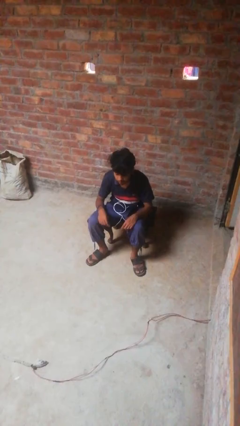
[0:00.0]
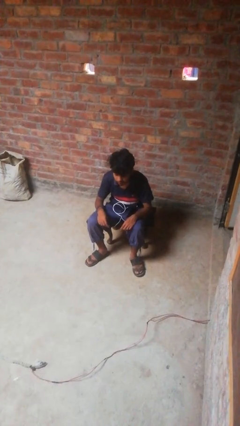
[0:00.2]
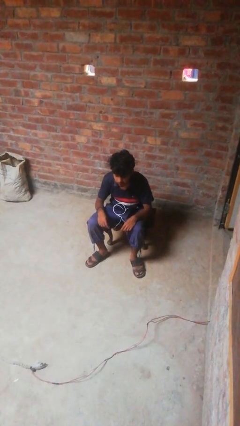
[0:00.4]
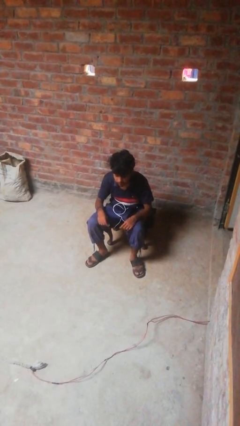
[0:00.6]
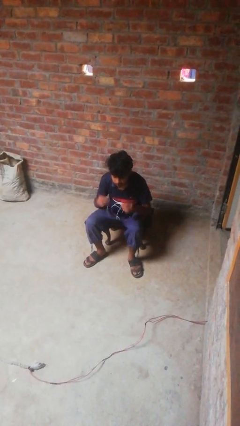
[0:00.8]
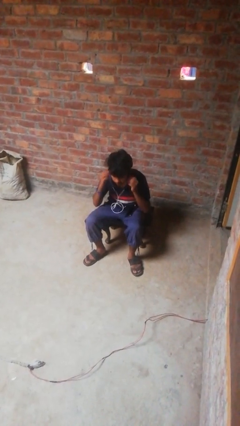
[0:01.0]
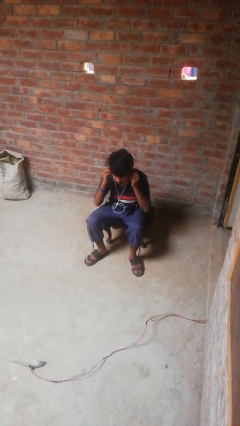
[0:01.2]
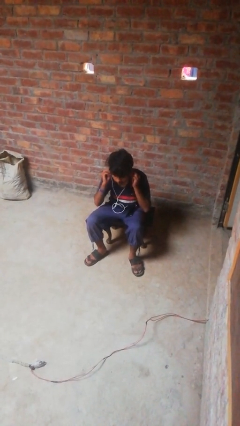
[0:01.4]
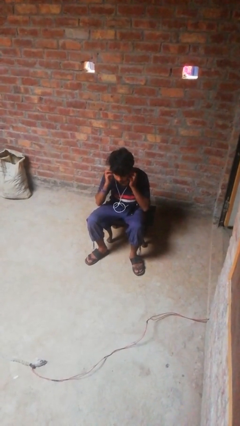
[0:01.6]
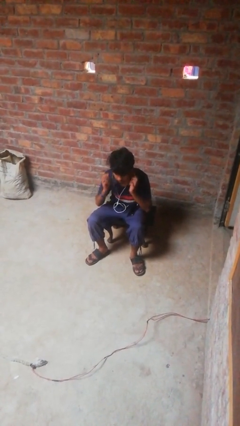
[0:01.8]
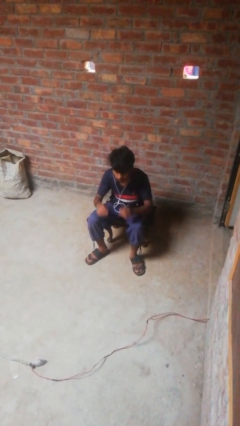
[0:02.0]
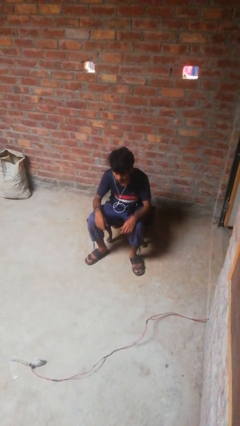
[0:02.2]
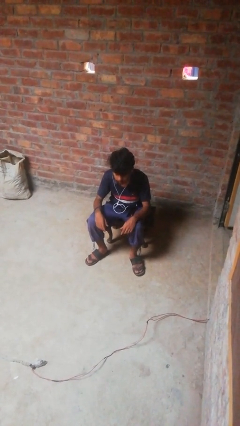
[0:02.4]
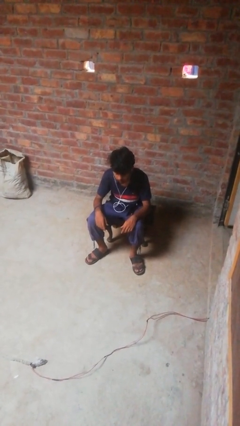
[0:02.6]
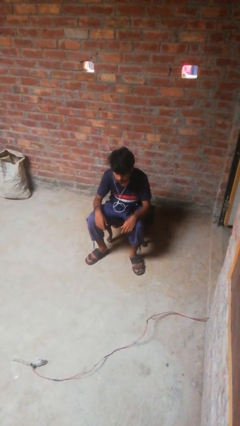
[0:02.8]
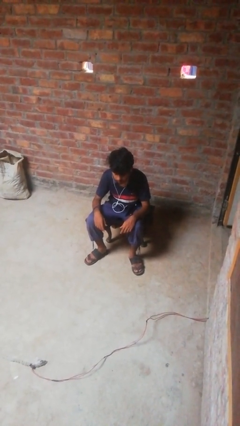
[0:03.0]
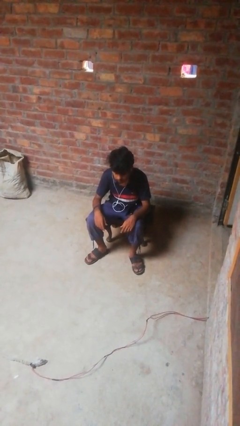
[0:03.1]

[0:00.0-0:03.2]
person puts on headphones

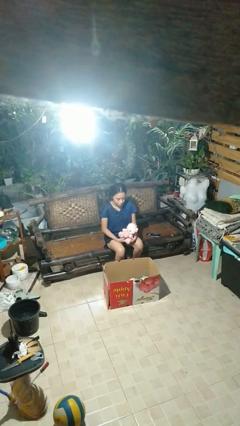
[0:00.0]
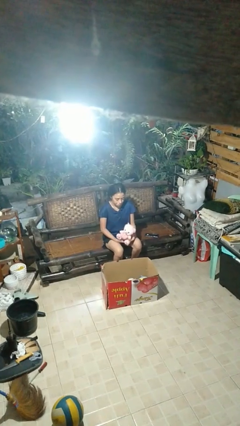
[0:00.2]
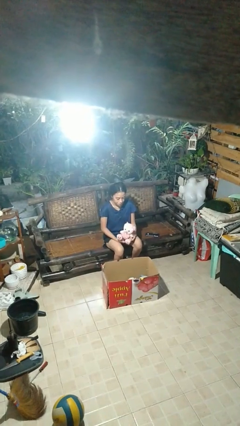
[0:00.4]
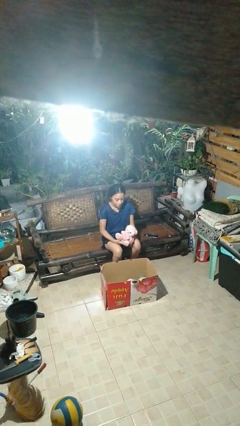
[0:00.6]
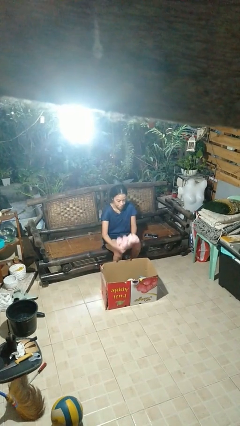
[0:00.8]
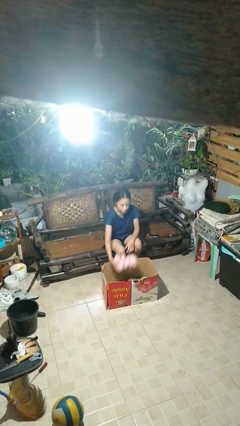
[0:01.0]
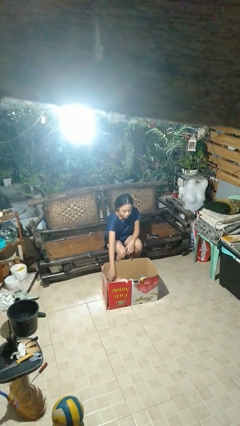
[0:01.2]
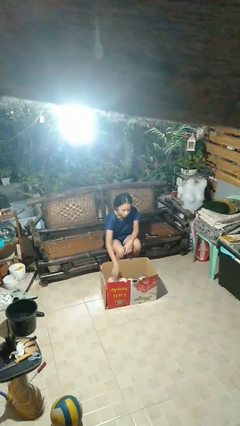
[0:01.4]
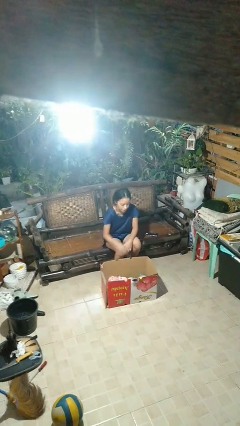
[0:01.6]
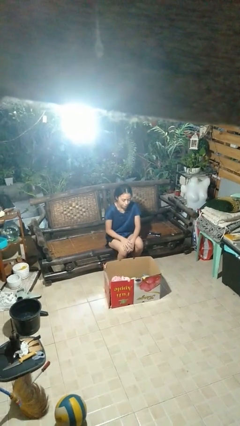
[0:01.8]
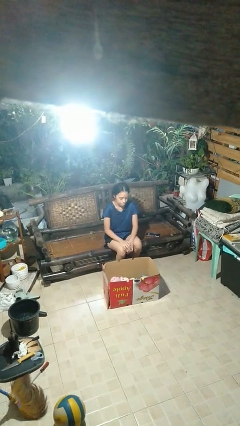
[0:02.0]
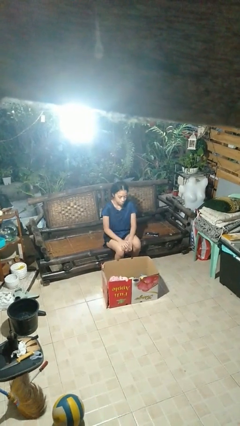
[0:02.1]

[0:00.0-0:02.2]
person puts object into box

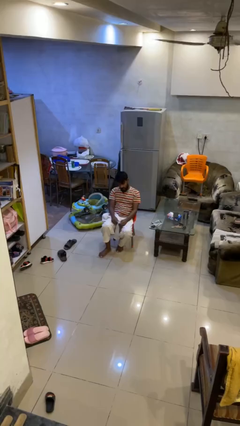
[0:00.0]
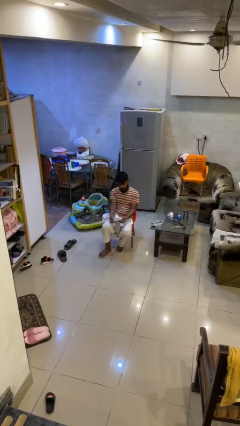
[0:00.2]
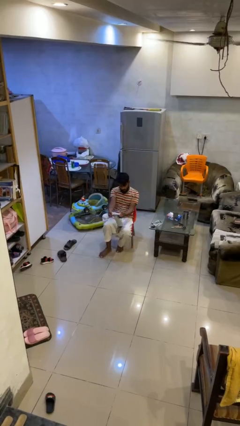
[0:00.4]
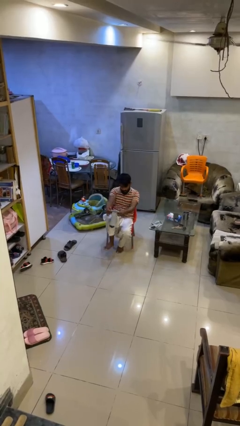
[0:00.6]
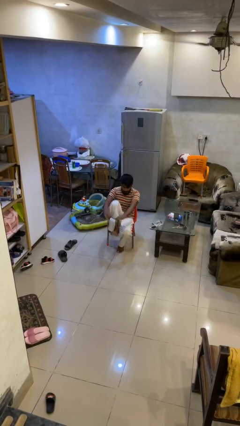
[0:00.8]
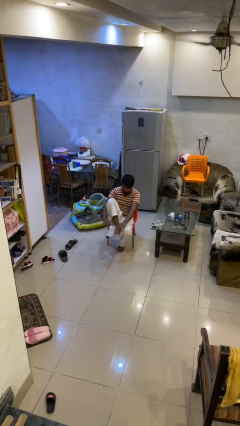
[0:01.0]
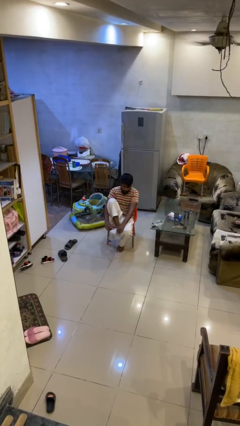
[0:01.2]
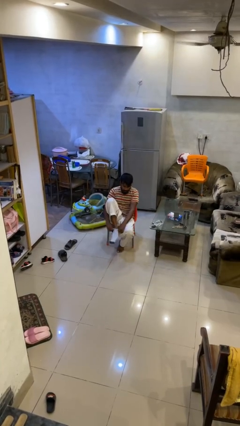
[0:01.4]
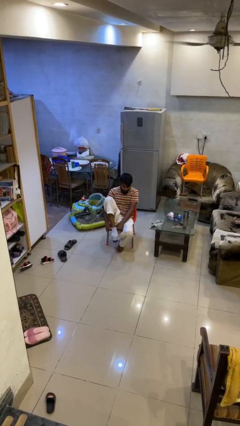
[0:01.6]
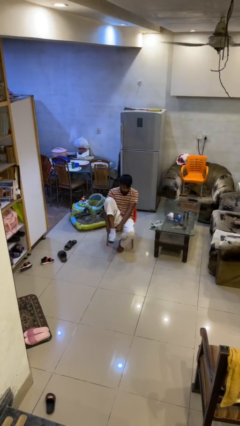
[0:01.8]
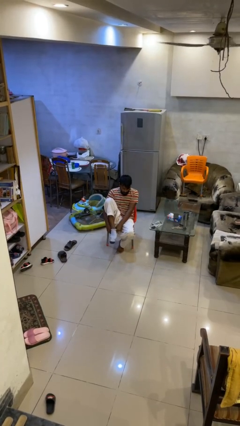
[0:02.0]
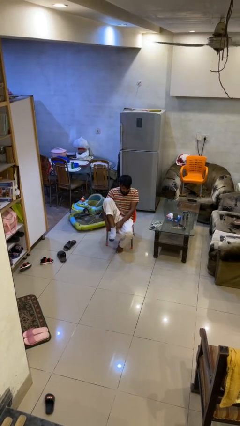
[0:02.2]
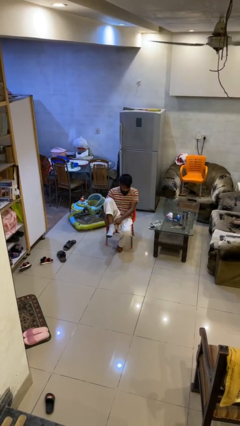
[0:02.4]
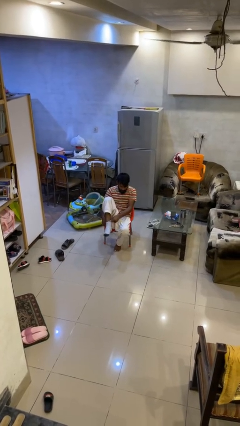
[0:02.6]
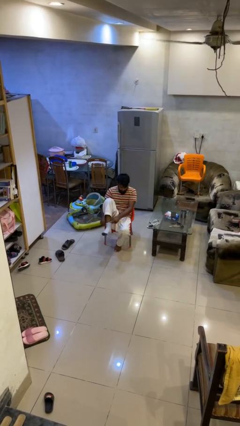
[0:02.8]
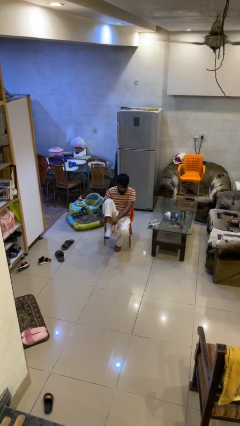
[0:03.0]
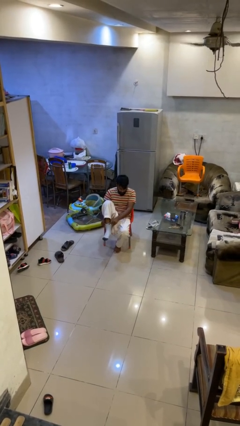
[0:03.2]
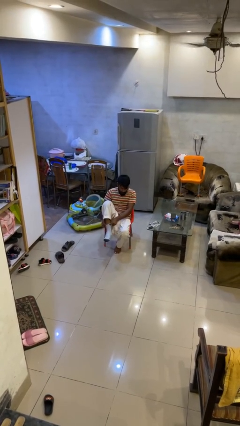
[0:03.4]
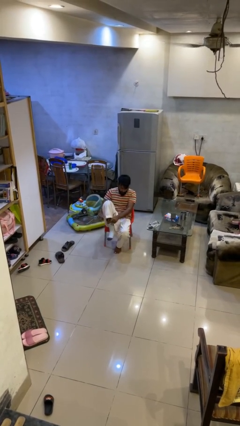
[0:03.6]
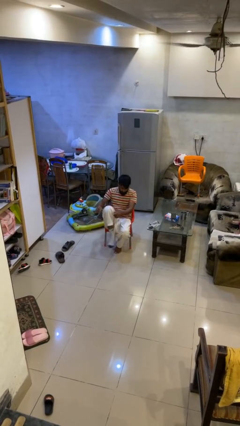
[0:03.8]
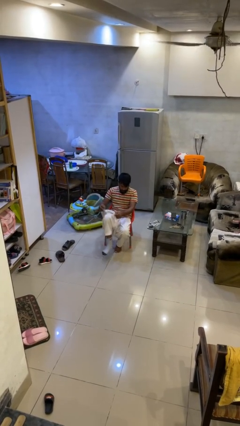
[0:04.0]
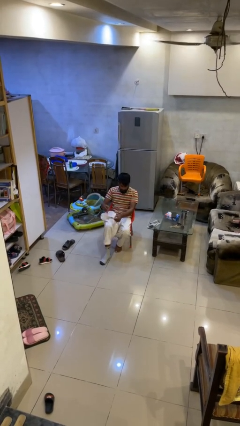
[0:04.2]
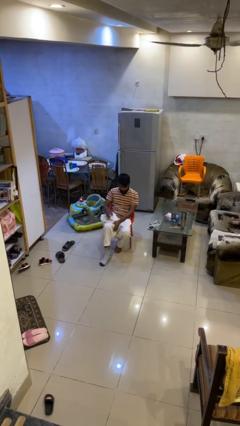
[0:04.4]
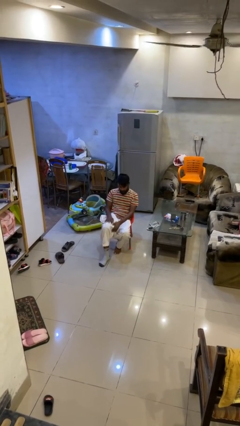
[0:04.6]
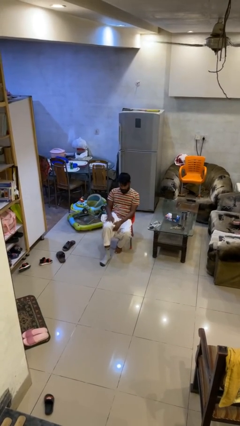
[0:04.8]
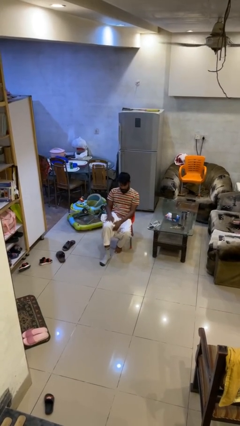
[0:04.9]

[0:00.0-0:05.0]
person puts on socks

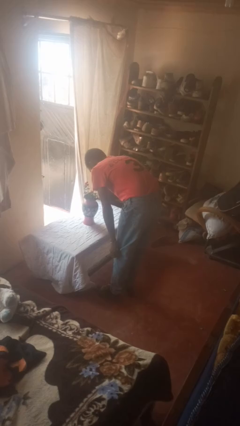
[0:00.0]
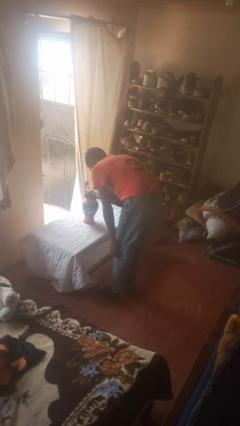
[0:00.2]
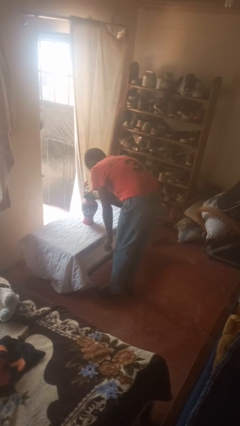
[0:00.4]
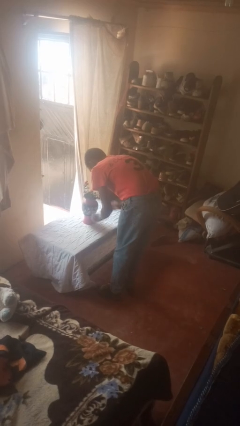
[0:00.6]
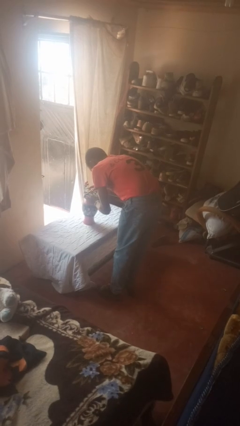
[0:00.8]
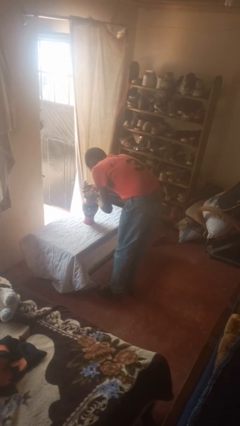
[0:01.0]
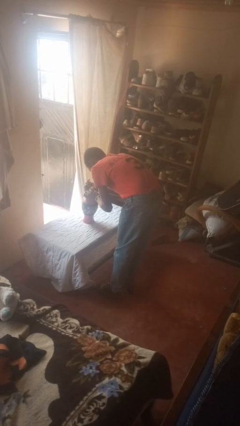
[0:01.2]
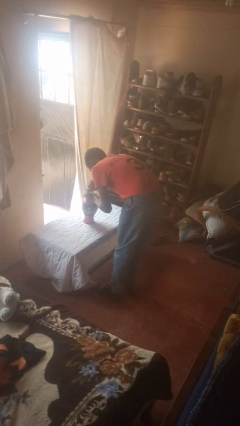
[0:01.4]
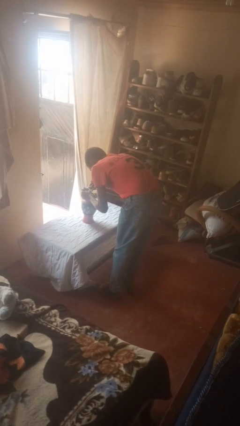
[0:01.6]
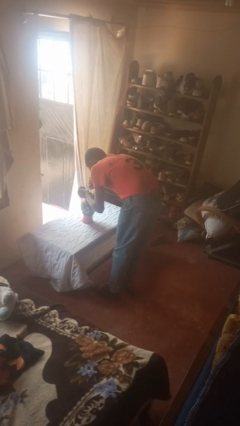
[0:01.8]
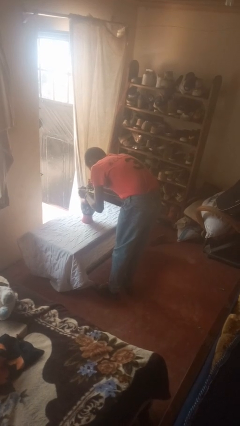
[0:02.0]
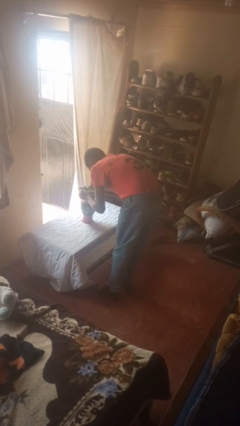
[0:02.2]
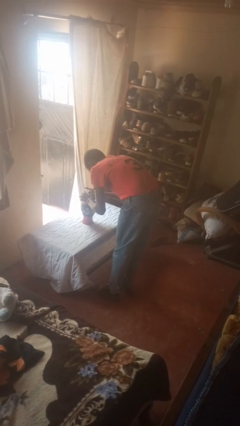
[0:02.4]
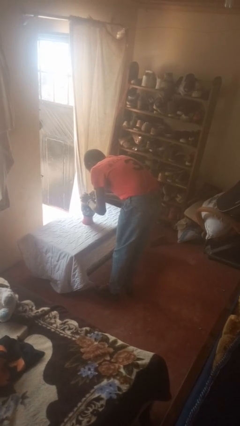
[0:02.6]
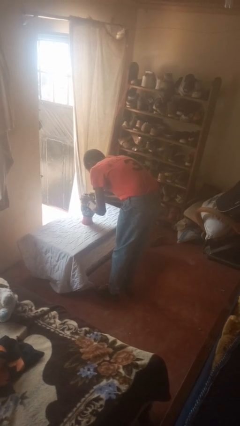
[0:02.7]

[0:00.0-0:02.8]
person arranges flowers in vase

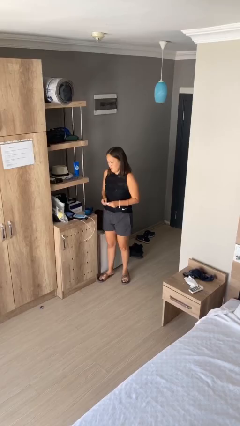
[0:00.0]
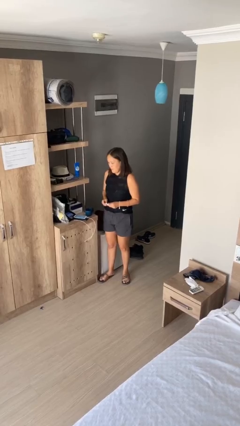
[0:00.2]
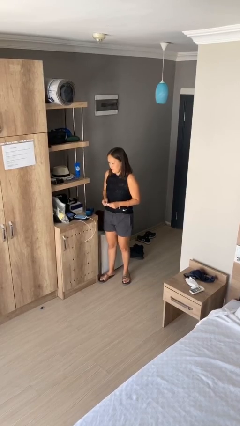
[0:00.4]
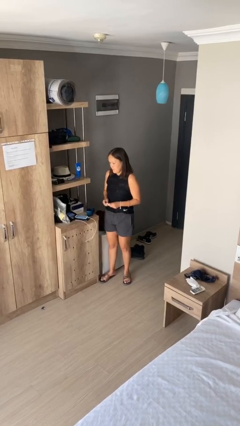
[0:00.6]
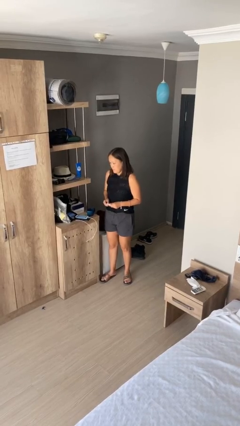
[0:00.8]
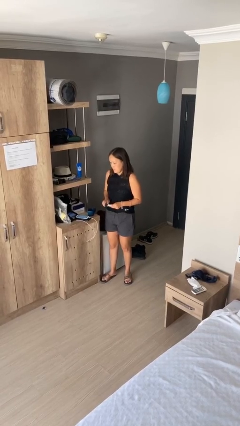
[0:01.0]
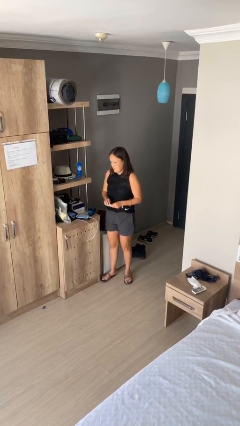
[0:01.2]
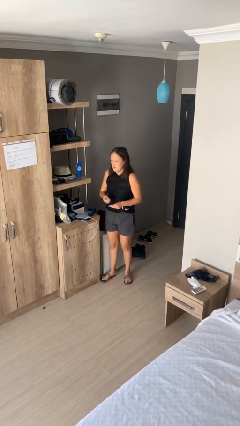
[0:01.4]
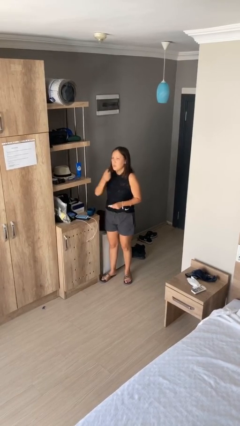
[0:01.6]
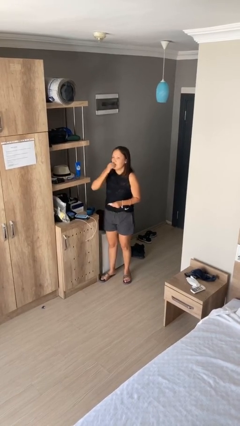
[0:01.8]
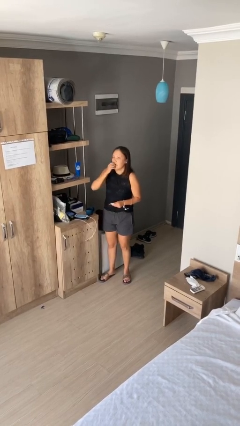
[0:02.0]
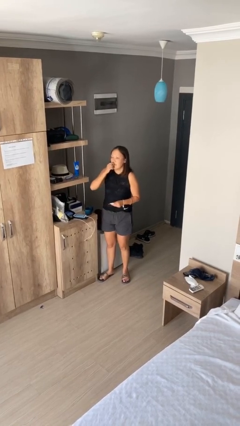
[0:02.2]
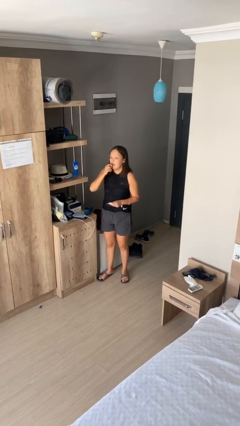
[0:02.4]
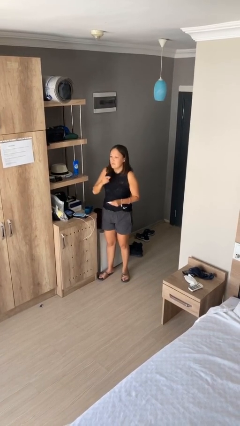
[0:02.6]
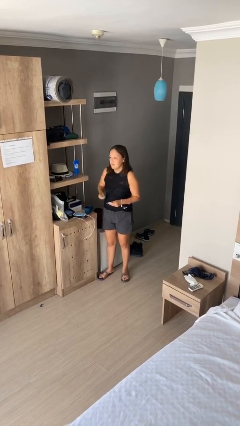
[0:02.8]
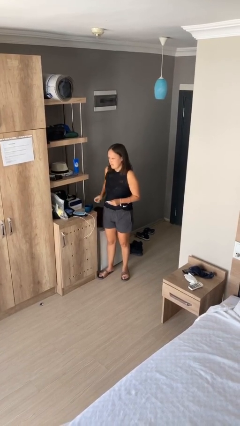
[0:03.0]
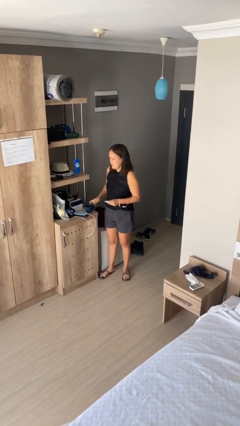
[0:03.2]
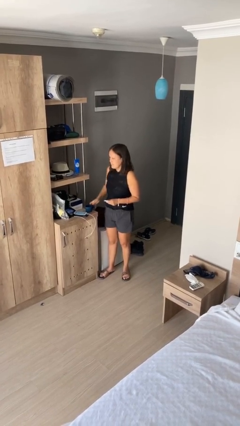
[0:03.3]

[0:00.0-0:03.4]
person takes medicine pills

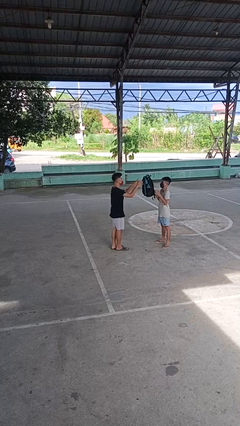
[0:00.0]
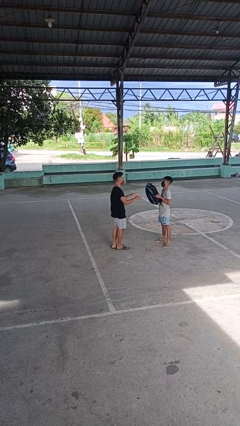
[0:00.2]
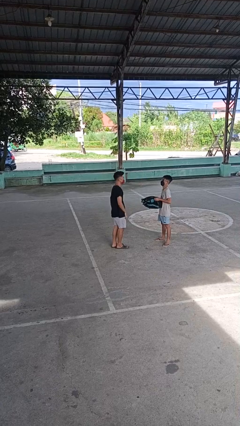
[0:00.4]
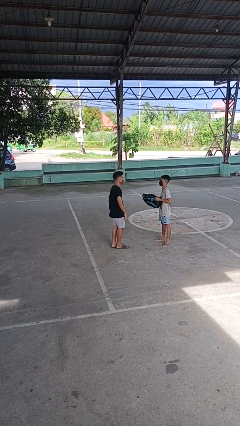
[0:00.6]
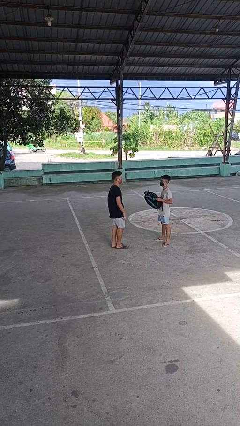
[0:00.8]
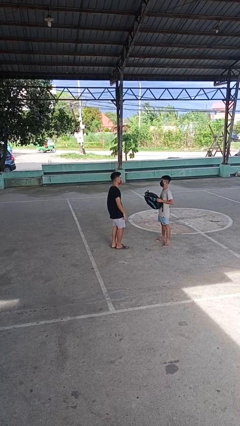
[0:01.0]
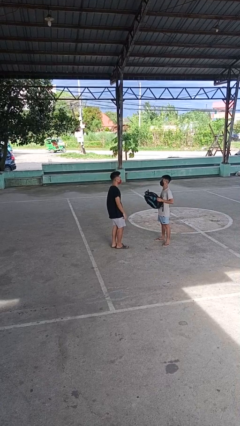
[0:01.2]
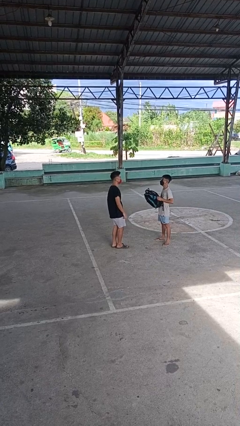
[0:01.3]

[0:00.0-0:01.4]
person throws object to person
